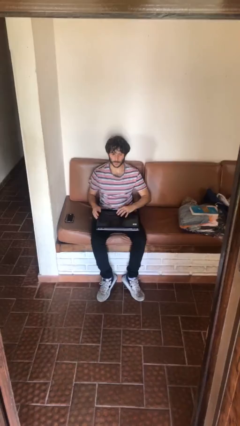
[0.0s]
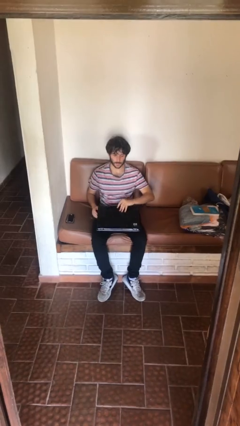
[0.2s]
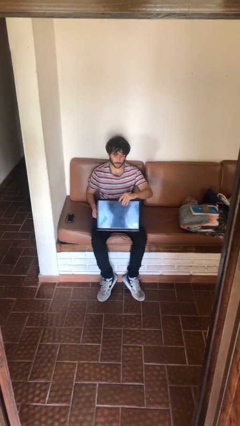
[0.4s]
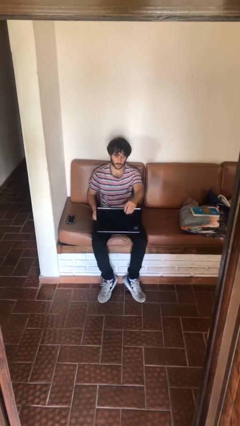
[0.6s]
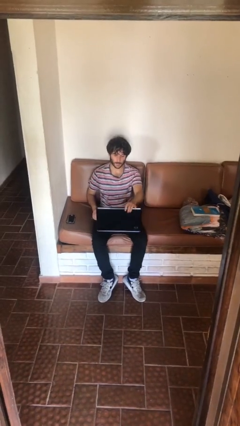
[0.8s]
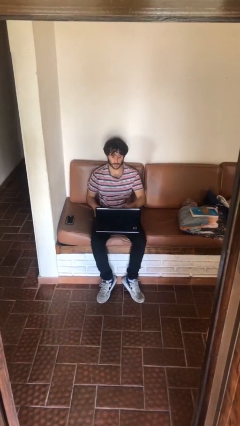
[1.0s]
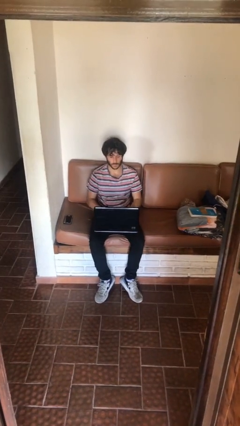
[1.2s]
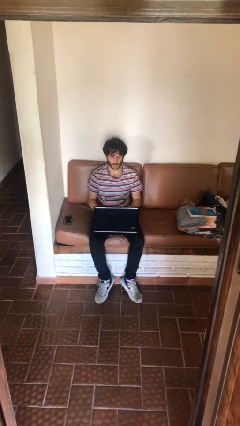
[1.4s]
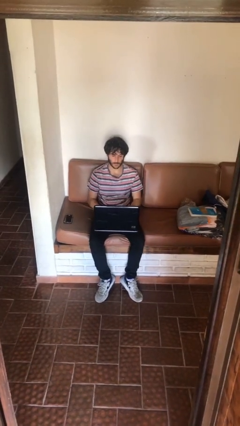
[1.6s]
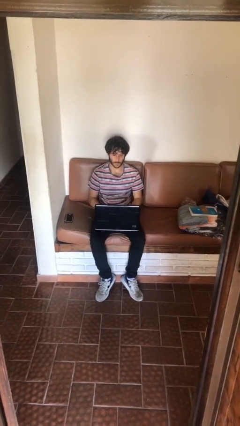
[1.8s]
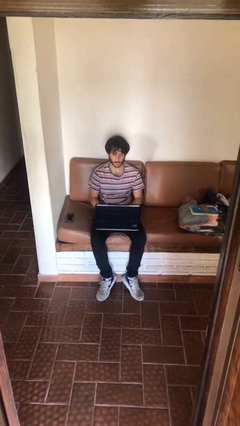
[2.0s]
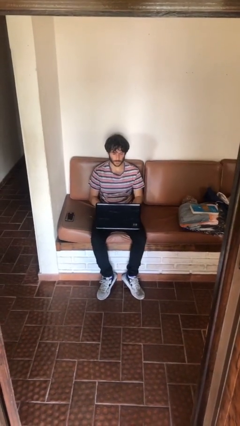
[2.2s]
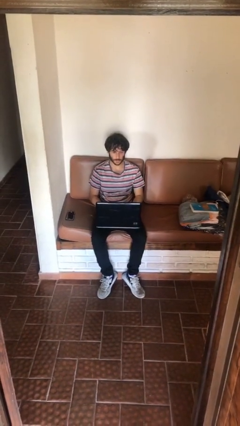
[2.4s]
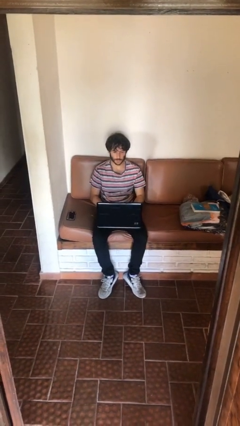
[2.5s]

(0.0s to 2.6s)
person interacts with laptop

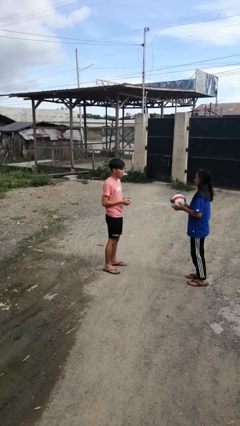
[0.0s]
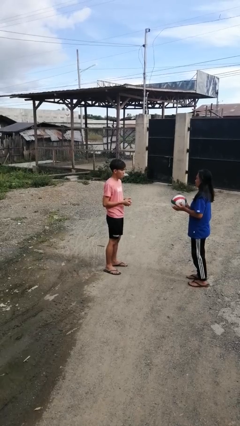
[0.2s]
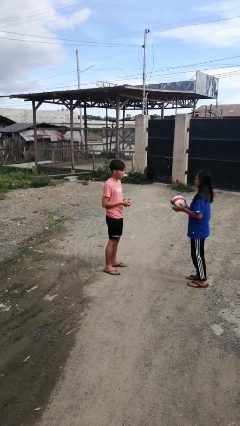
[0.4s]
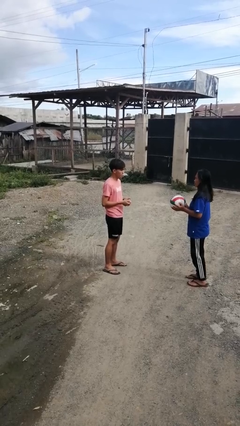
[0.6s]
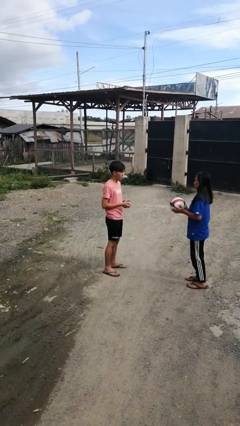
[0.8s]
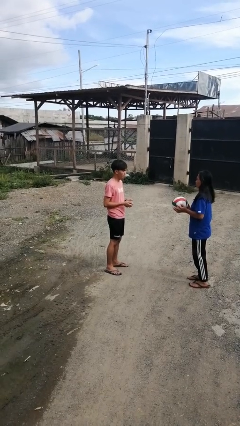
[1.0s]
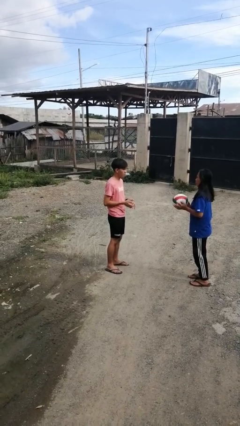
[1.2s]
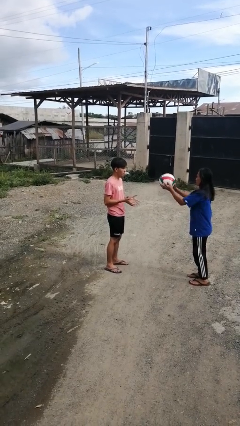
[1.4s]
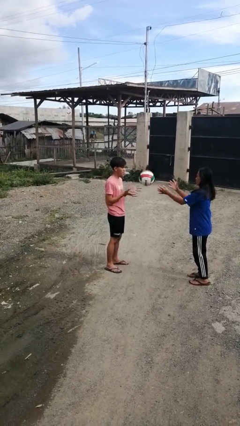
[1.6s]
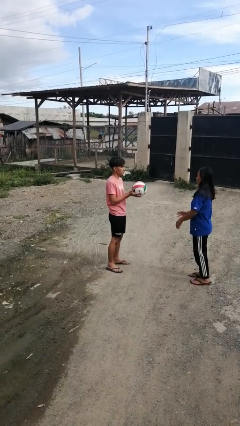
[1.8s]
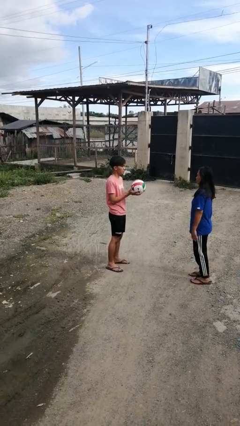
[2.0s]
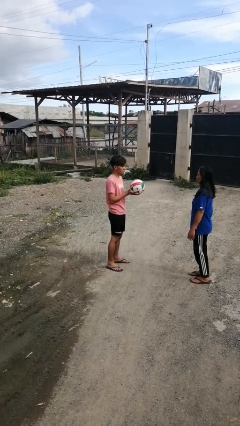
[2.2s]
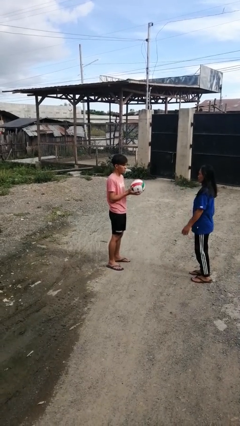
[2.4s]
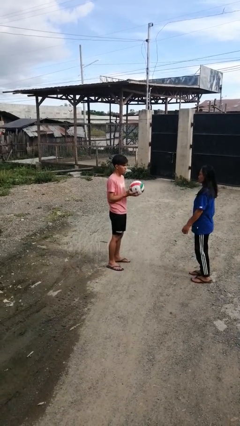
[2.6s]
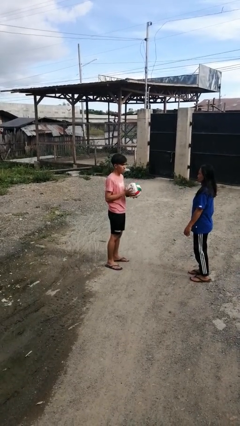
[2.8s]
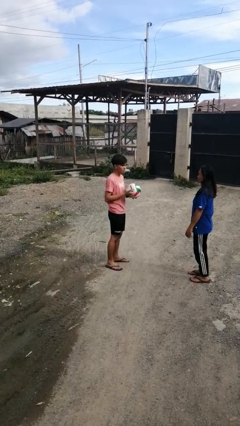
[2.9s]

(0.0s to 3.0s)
person catches object from person

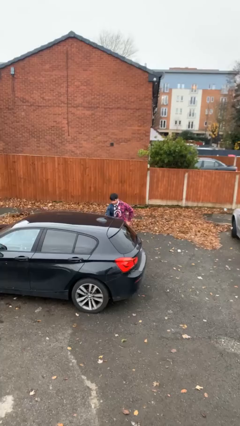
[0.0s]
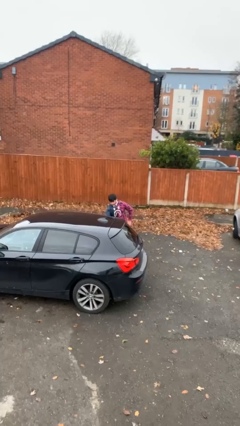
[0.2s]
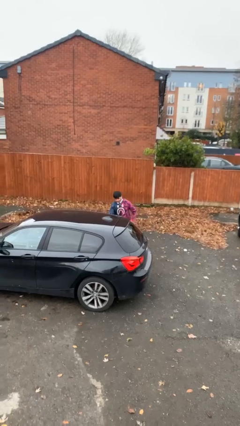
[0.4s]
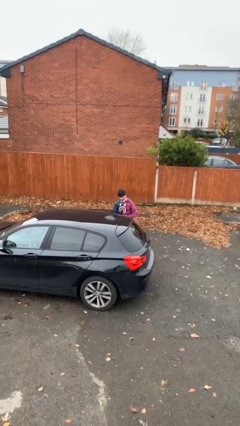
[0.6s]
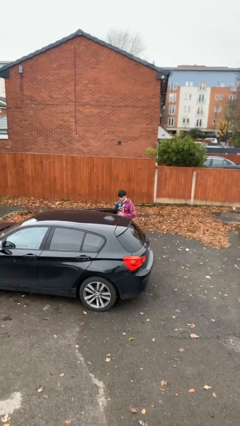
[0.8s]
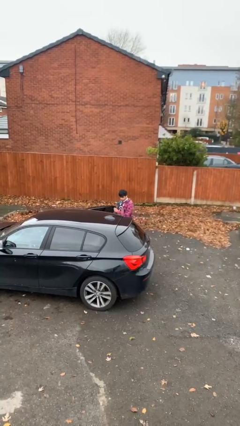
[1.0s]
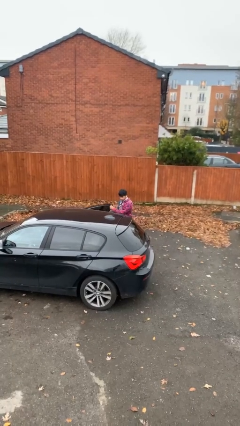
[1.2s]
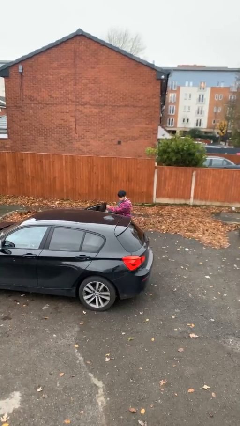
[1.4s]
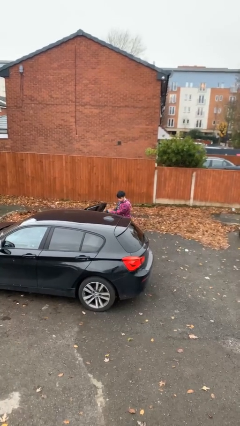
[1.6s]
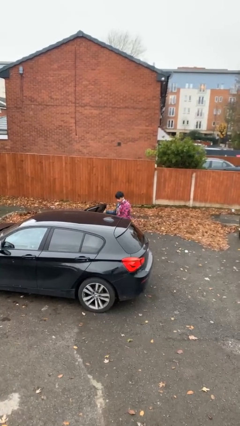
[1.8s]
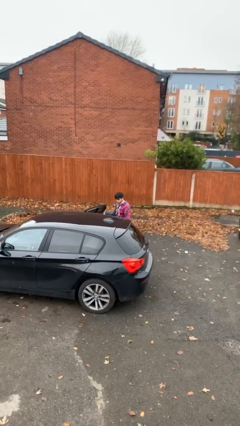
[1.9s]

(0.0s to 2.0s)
person opens car door

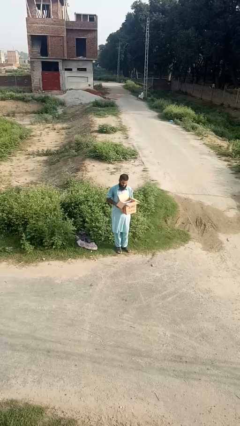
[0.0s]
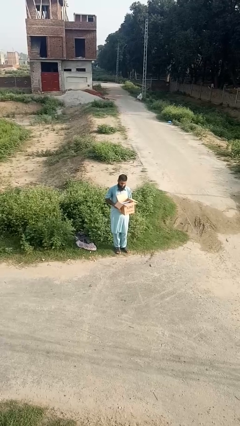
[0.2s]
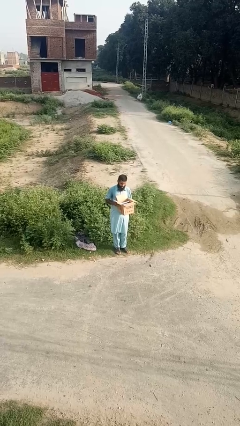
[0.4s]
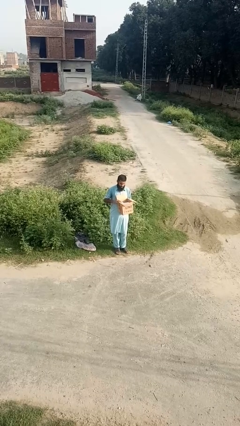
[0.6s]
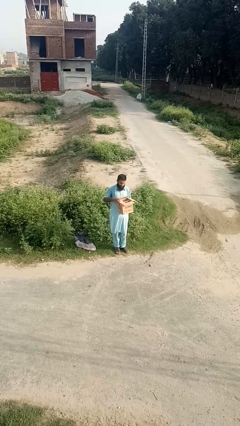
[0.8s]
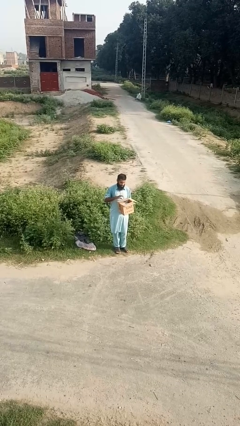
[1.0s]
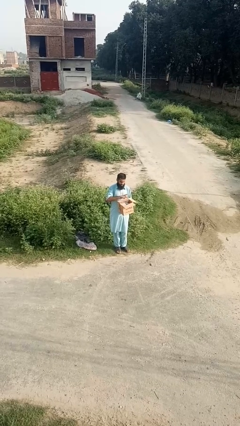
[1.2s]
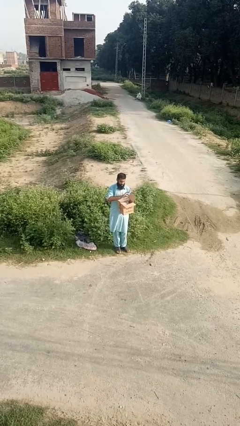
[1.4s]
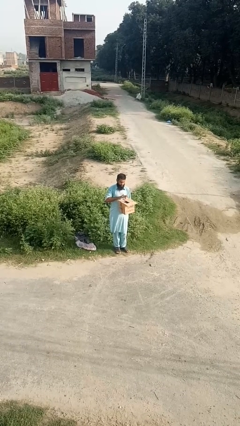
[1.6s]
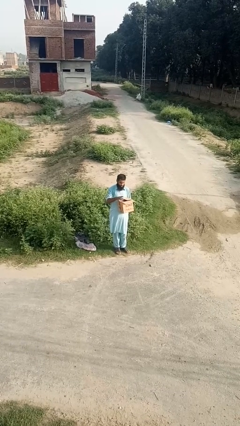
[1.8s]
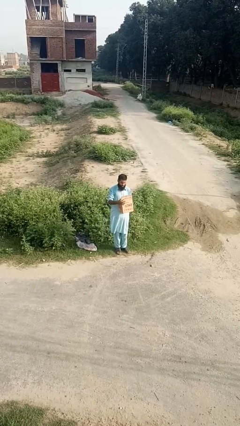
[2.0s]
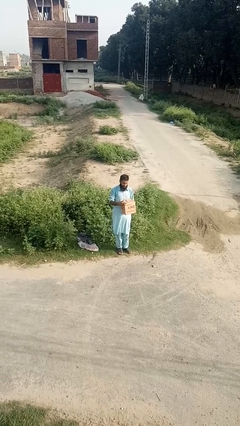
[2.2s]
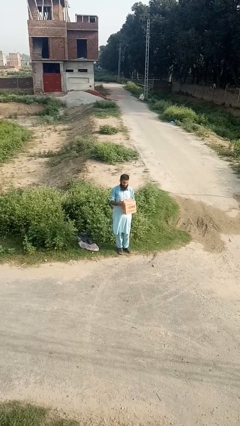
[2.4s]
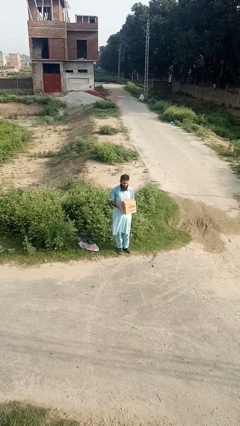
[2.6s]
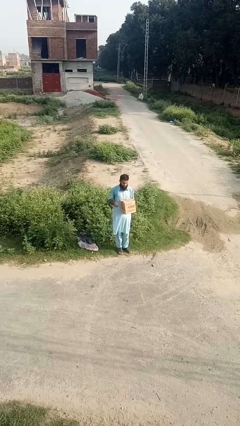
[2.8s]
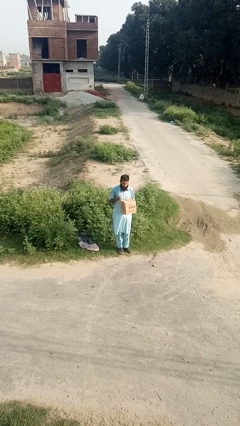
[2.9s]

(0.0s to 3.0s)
person closes mailbox

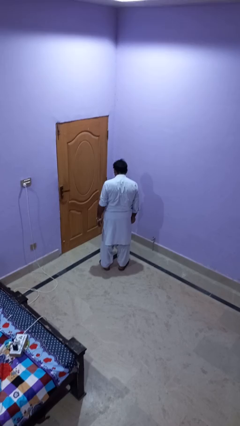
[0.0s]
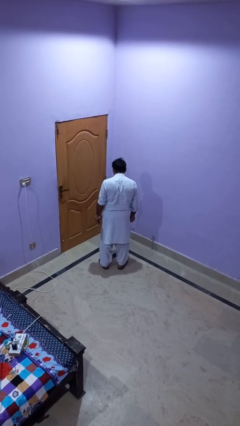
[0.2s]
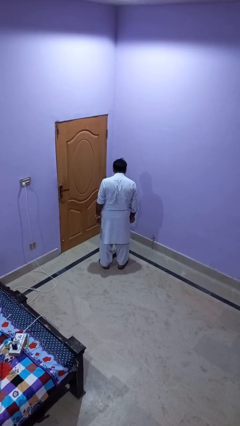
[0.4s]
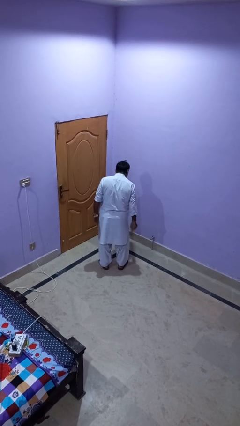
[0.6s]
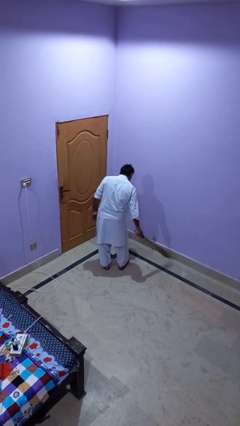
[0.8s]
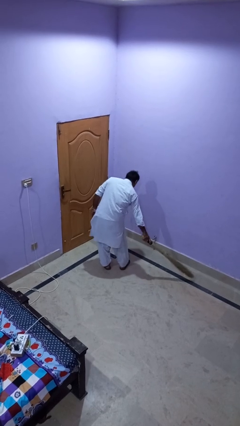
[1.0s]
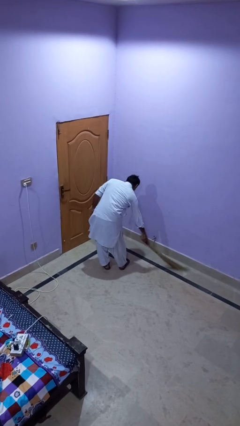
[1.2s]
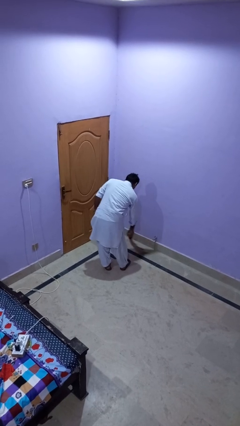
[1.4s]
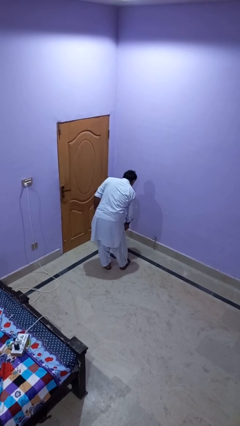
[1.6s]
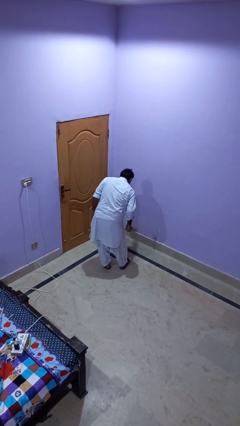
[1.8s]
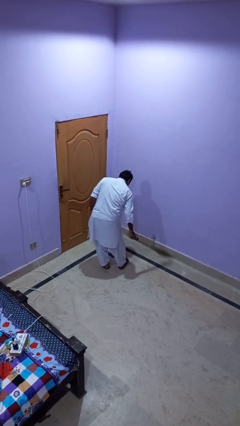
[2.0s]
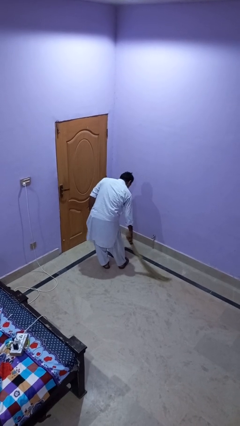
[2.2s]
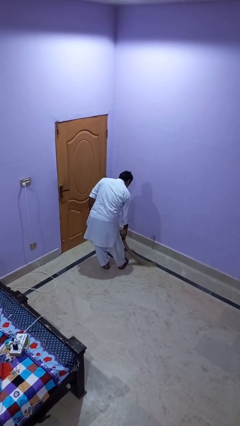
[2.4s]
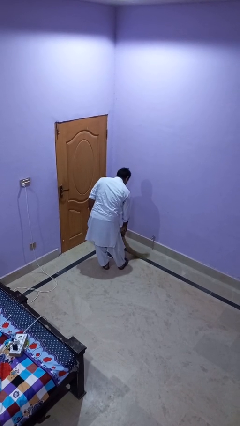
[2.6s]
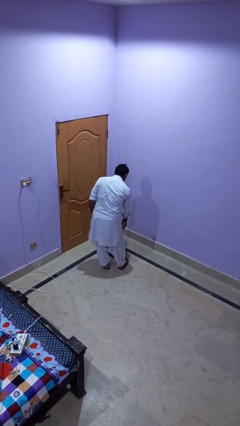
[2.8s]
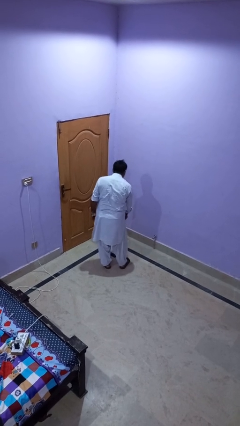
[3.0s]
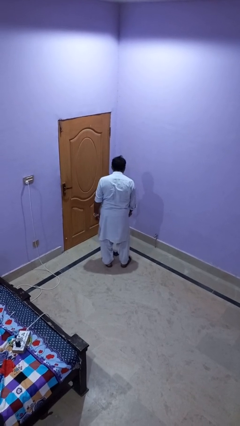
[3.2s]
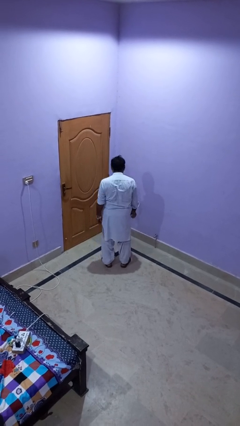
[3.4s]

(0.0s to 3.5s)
person sweeps floor

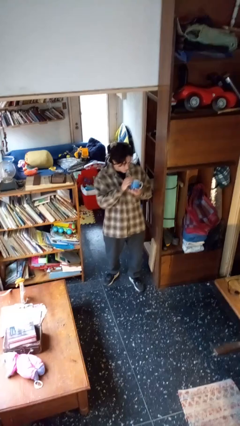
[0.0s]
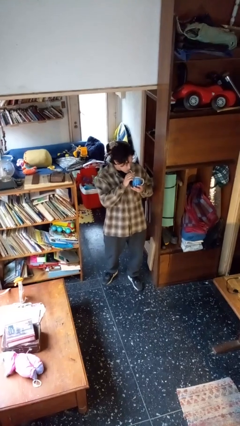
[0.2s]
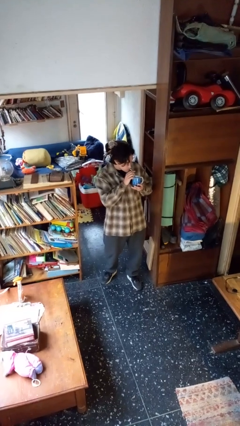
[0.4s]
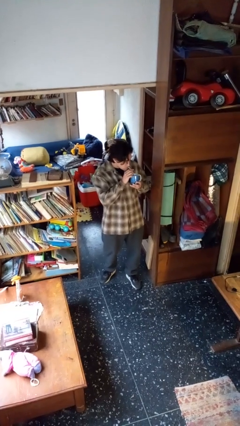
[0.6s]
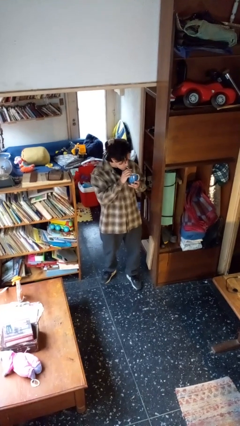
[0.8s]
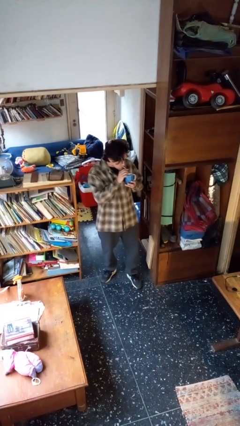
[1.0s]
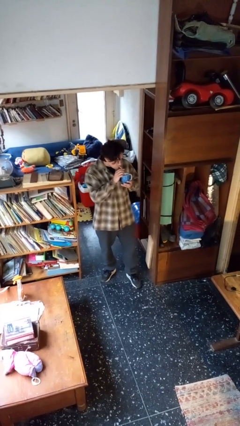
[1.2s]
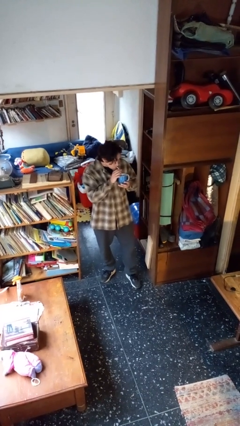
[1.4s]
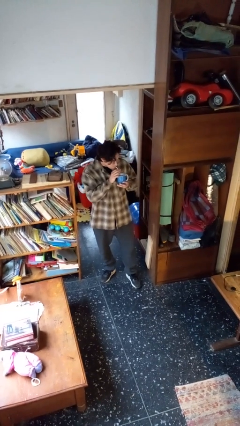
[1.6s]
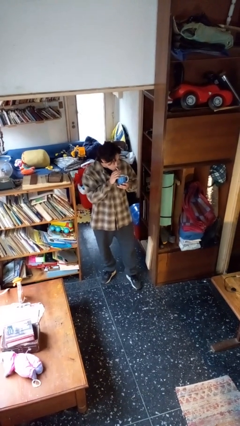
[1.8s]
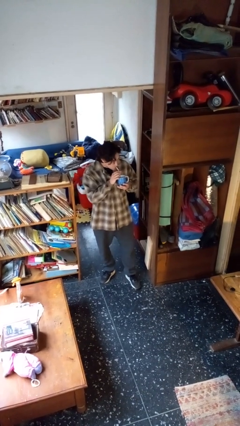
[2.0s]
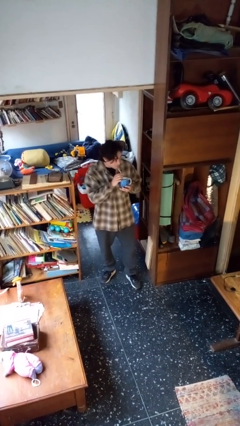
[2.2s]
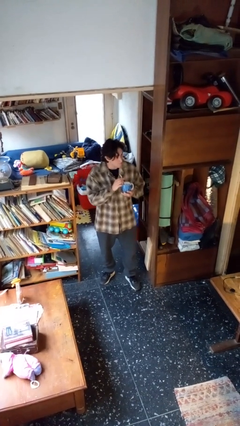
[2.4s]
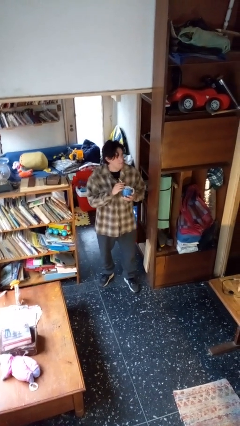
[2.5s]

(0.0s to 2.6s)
person drinks from straw

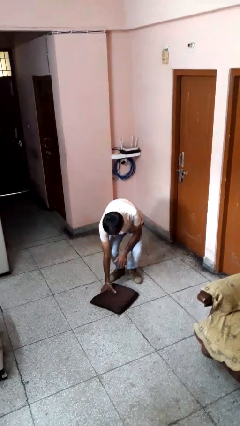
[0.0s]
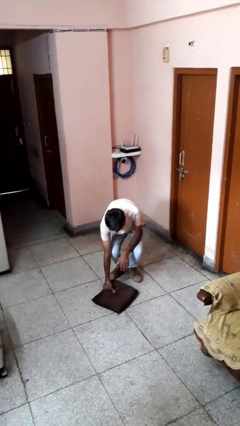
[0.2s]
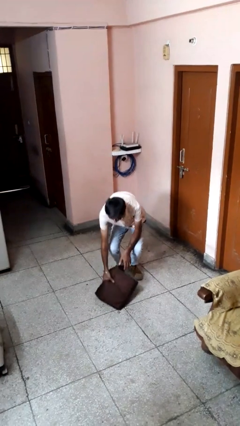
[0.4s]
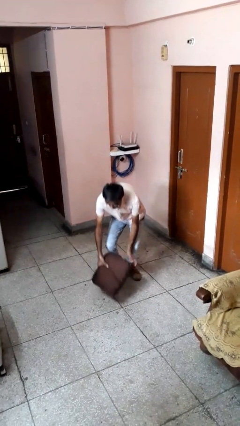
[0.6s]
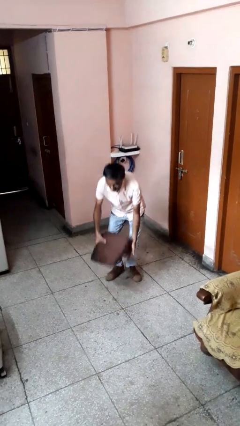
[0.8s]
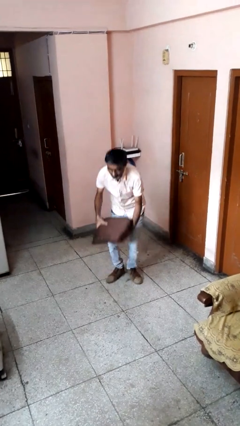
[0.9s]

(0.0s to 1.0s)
person picks up object from floor
